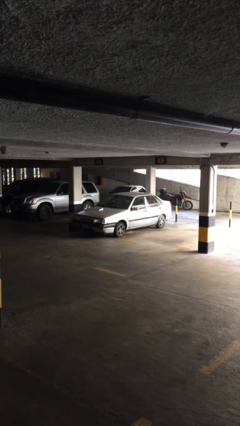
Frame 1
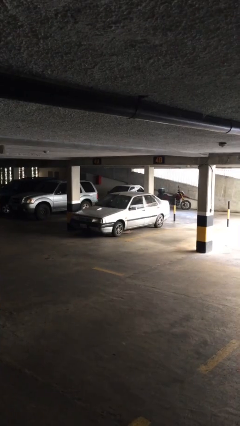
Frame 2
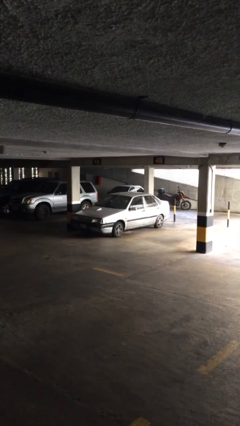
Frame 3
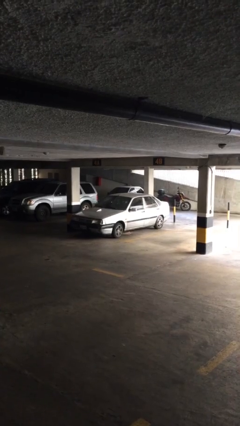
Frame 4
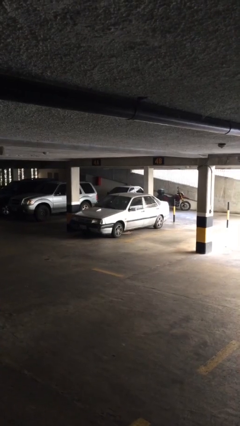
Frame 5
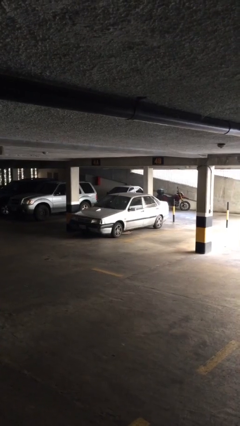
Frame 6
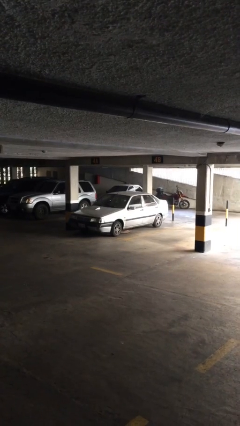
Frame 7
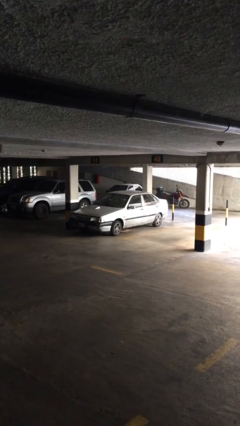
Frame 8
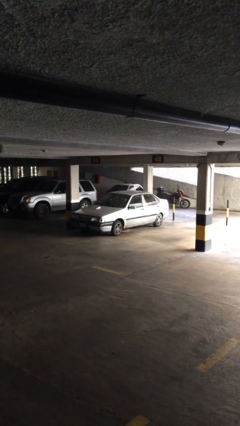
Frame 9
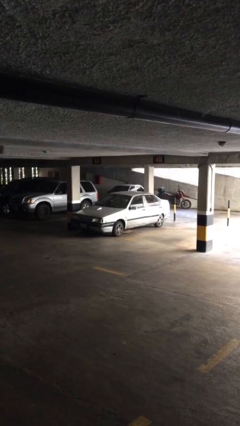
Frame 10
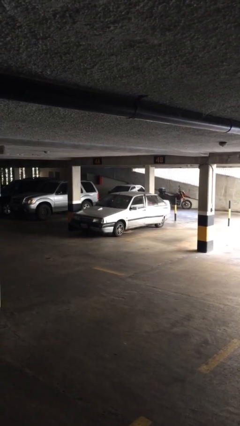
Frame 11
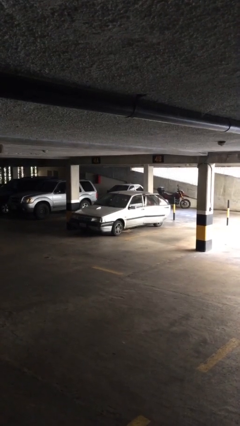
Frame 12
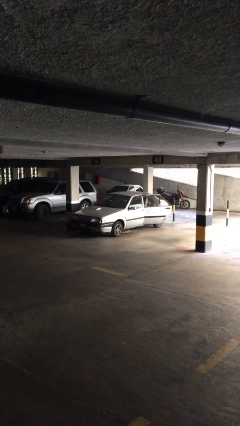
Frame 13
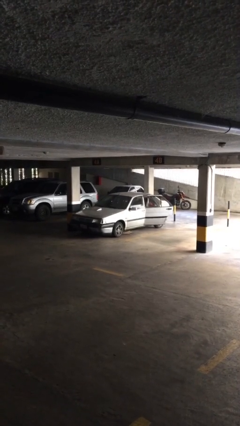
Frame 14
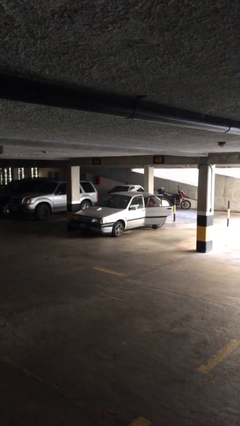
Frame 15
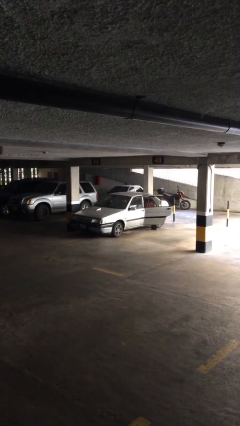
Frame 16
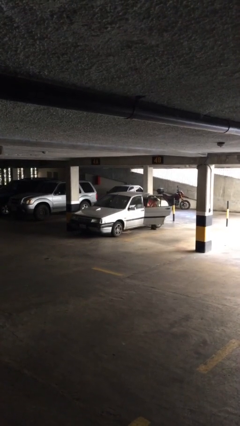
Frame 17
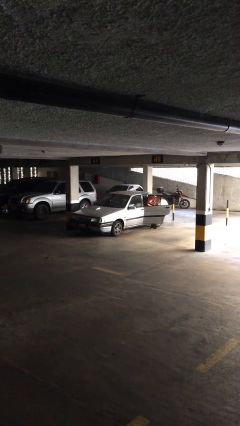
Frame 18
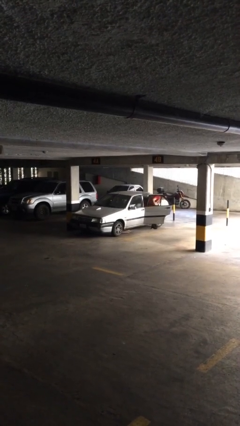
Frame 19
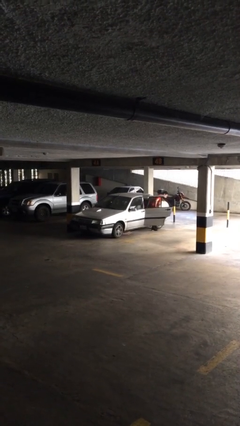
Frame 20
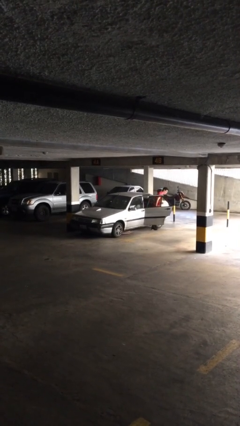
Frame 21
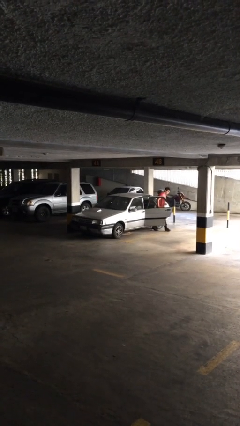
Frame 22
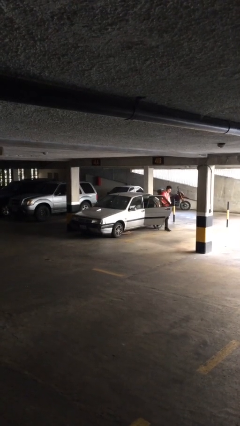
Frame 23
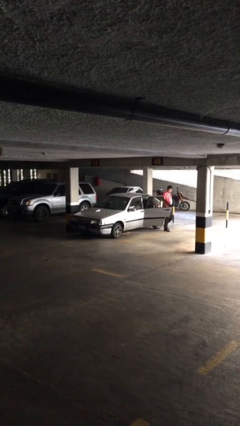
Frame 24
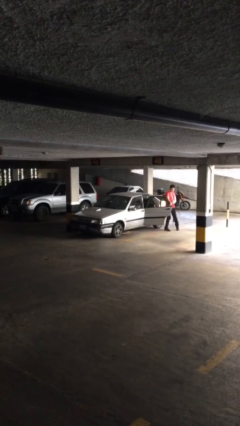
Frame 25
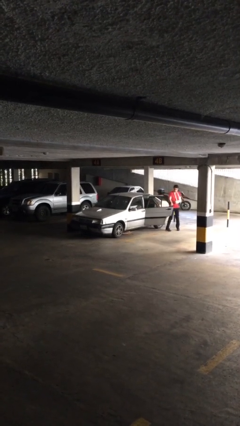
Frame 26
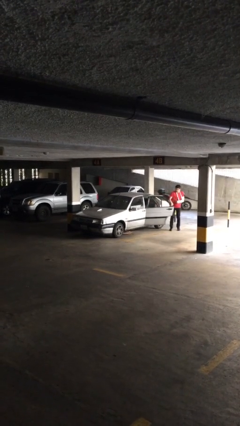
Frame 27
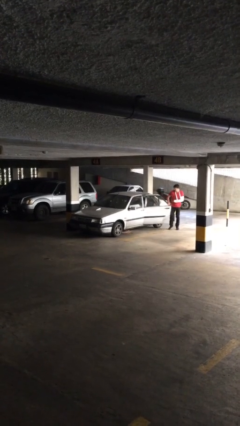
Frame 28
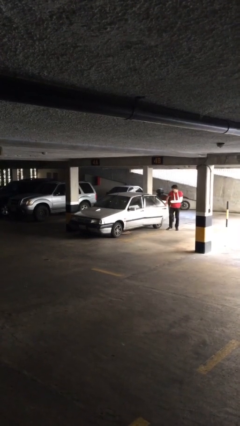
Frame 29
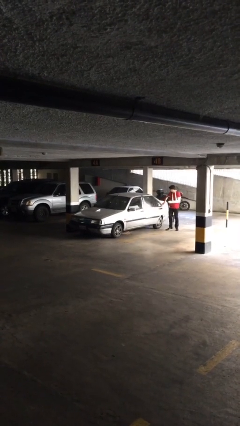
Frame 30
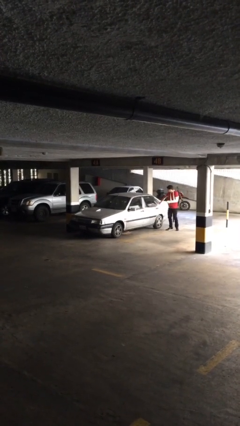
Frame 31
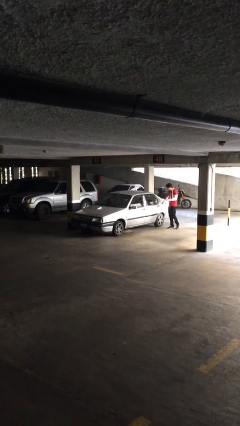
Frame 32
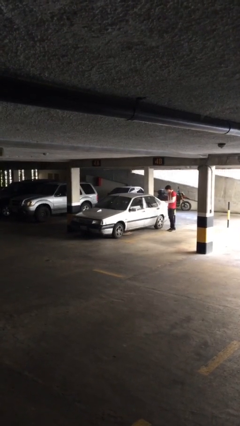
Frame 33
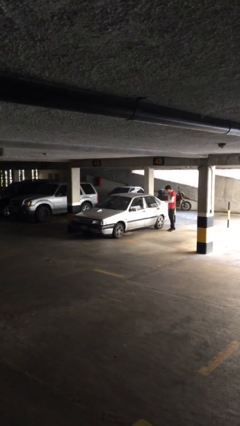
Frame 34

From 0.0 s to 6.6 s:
car drops off person

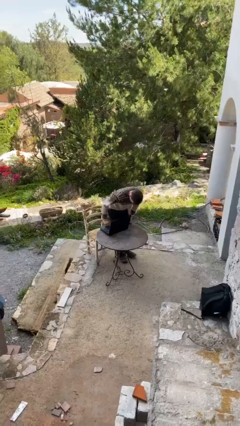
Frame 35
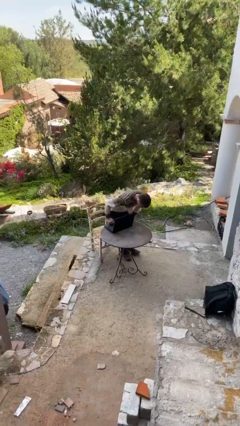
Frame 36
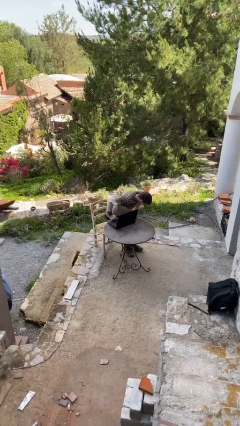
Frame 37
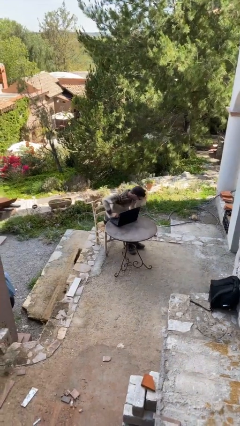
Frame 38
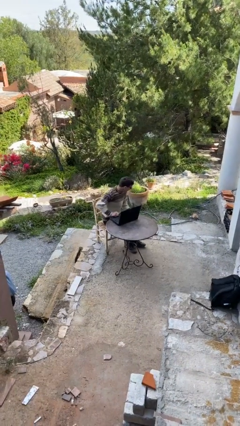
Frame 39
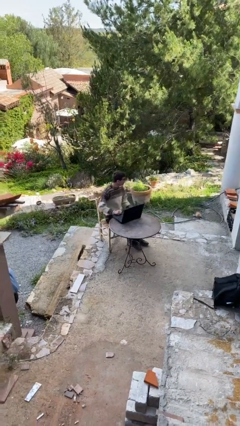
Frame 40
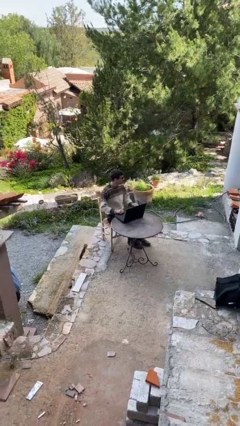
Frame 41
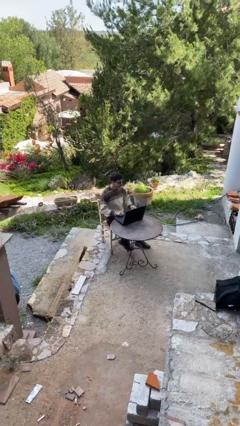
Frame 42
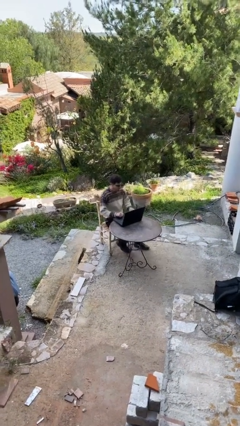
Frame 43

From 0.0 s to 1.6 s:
person sits down

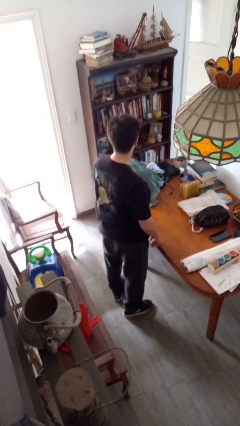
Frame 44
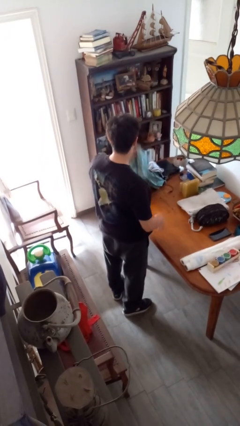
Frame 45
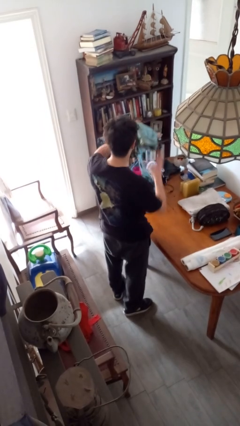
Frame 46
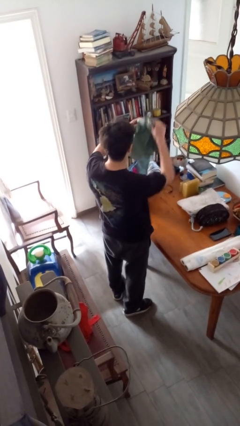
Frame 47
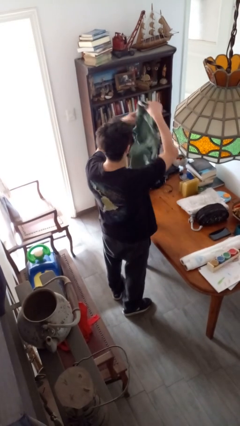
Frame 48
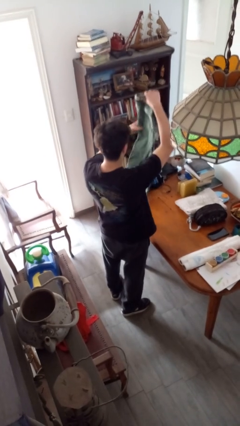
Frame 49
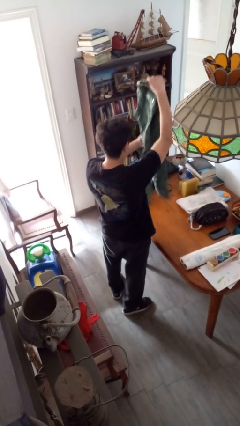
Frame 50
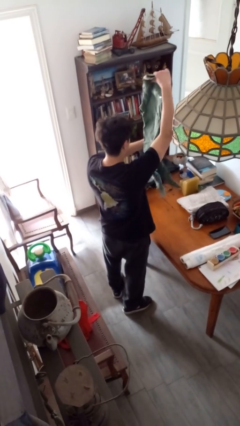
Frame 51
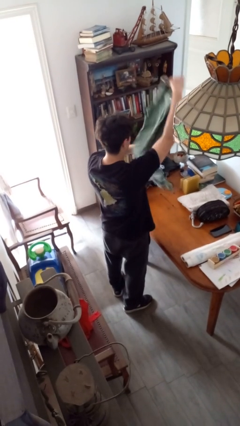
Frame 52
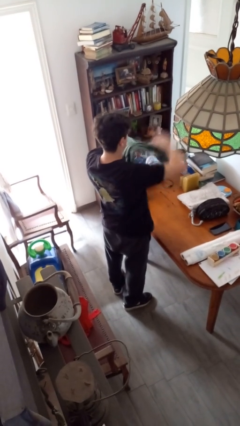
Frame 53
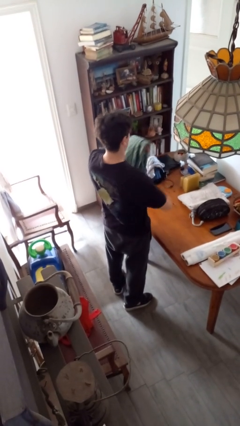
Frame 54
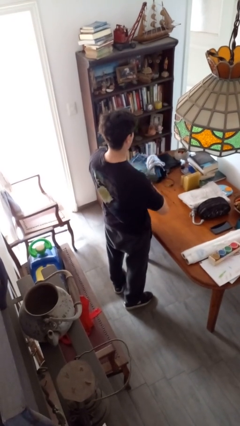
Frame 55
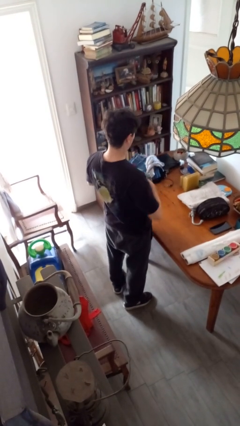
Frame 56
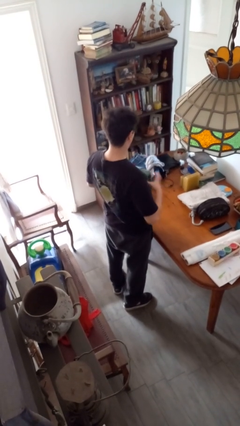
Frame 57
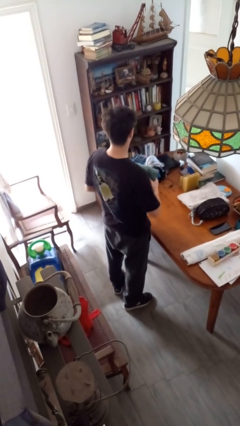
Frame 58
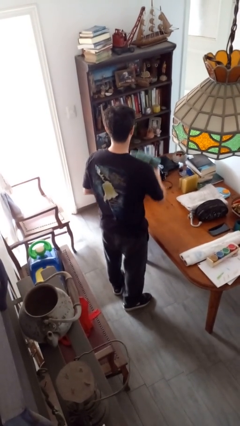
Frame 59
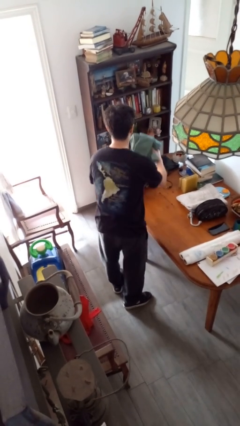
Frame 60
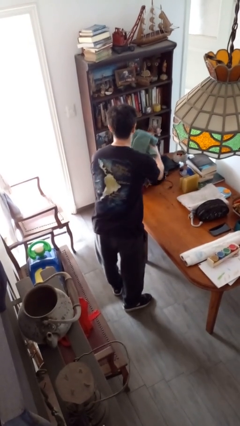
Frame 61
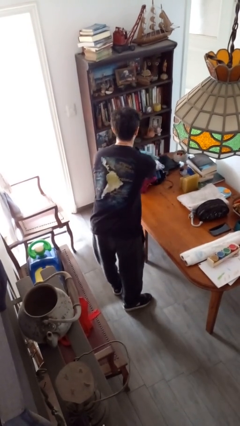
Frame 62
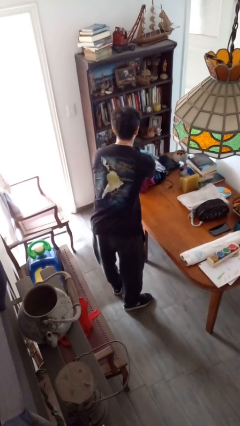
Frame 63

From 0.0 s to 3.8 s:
person folds shirt

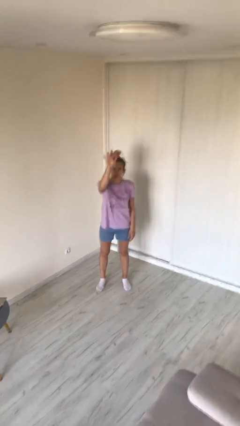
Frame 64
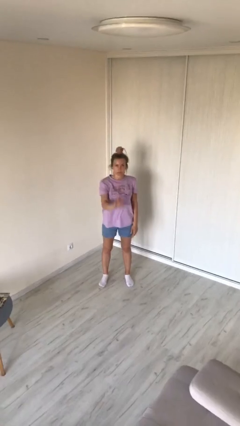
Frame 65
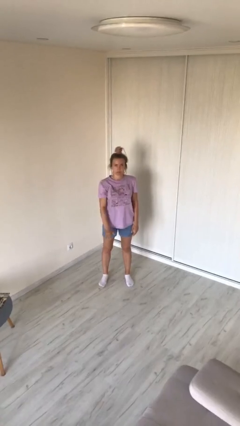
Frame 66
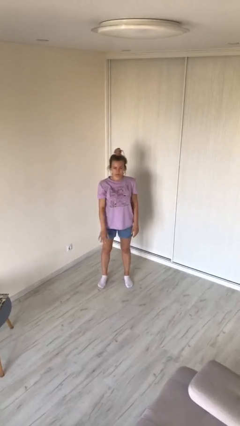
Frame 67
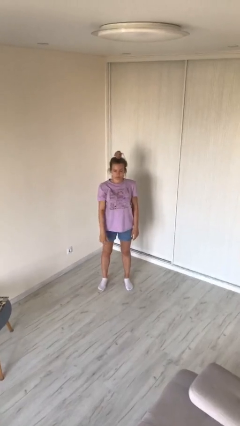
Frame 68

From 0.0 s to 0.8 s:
person gestures swipe down

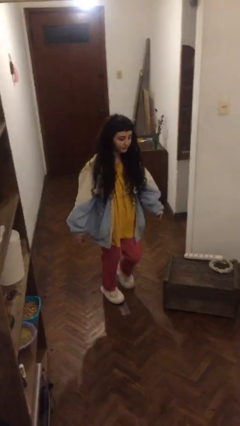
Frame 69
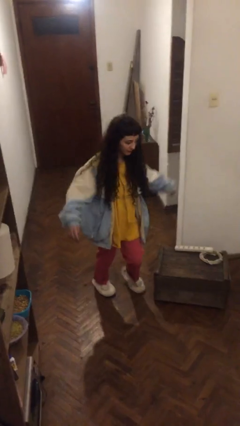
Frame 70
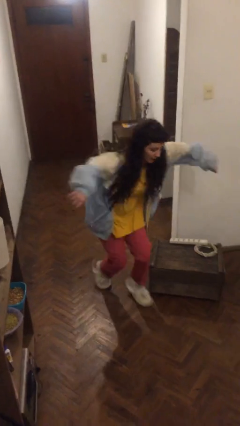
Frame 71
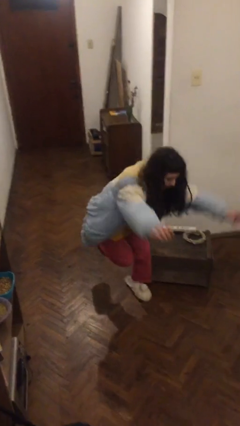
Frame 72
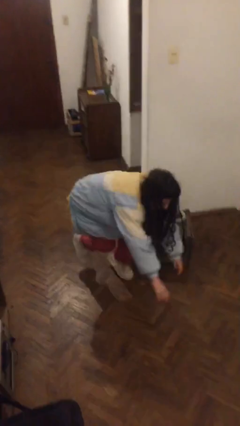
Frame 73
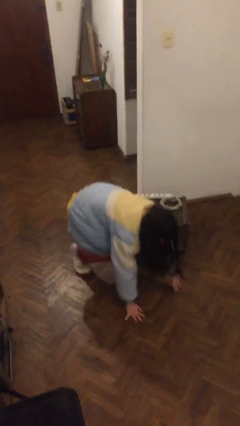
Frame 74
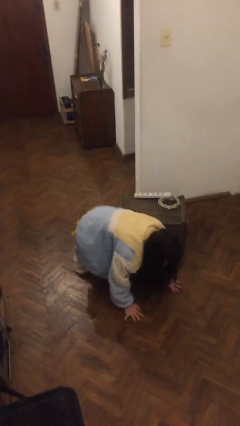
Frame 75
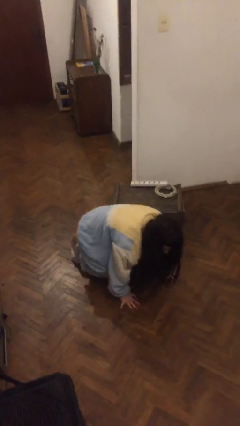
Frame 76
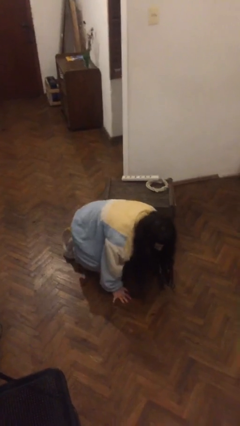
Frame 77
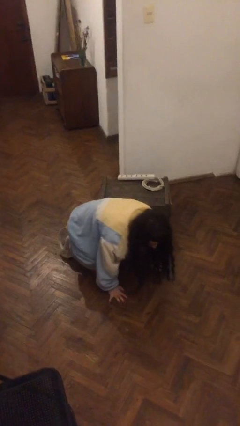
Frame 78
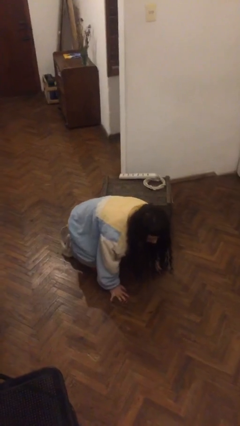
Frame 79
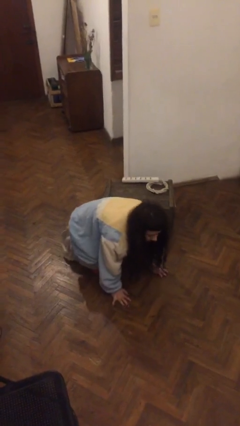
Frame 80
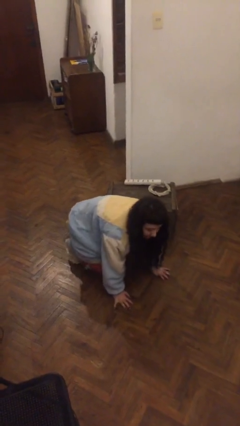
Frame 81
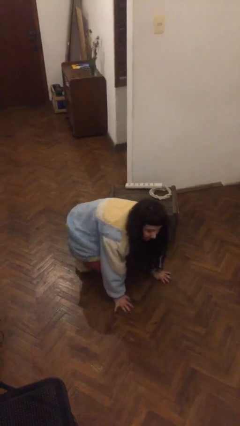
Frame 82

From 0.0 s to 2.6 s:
person trips on object on floor

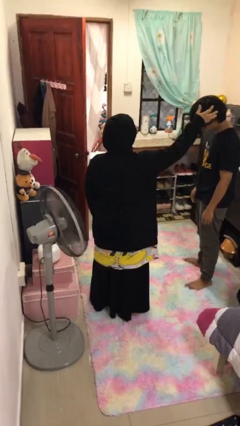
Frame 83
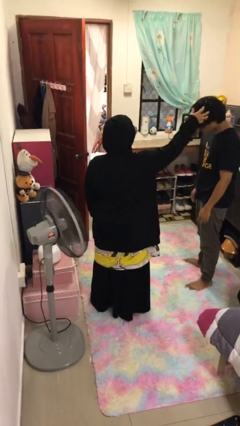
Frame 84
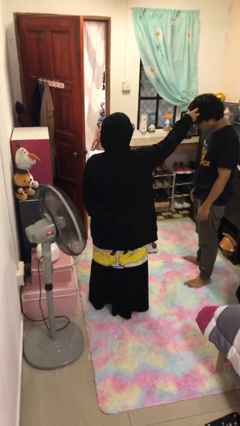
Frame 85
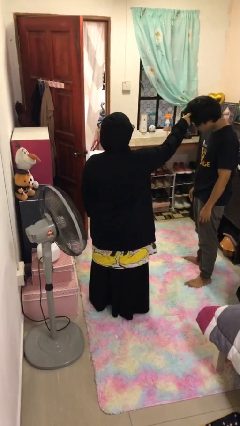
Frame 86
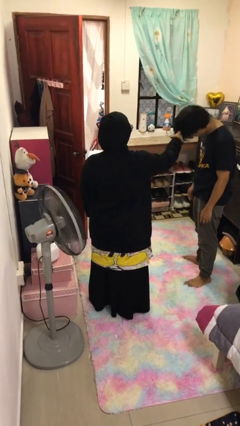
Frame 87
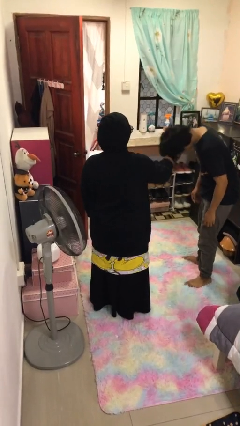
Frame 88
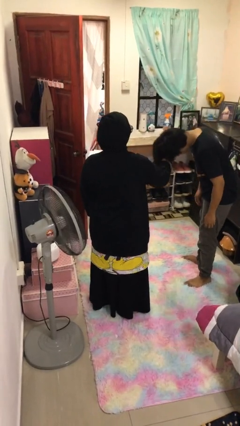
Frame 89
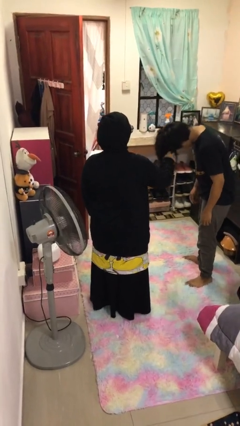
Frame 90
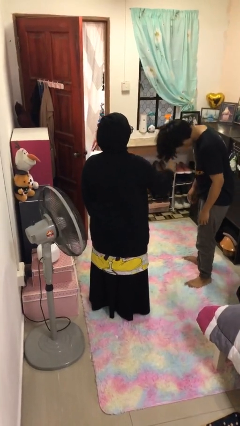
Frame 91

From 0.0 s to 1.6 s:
person grabs person by hair

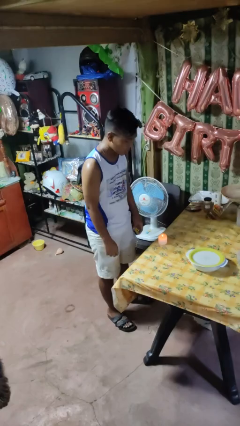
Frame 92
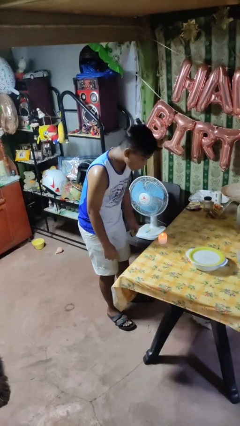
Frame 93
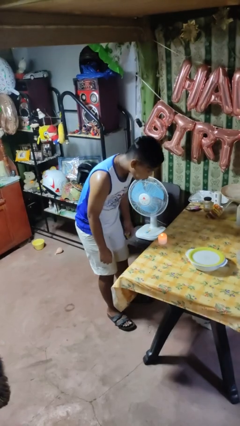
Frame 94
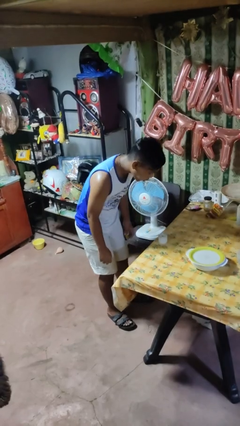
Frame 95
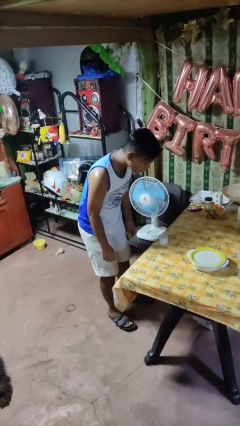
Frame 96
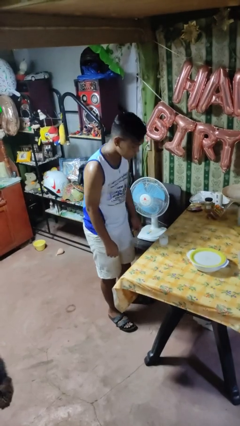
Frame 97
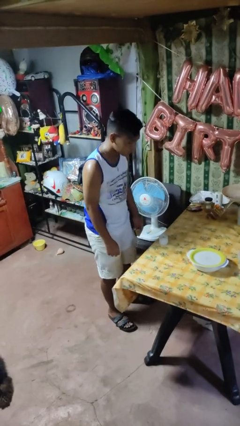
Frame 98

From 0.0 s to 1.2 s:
person extinguishes candle
